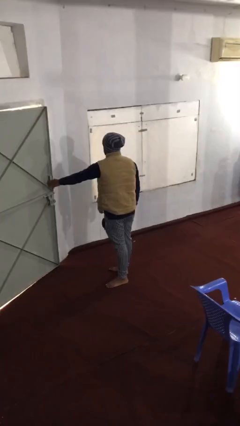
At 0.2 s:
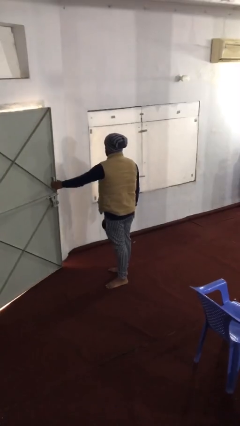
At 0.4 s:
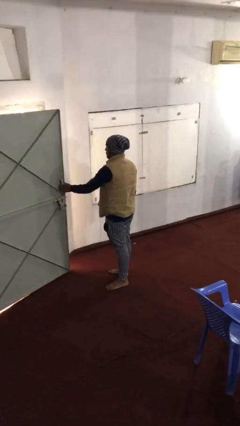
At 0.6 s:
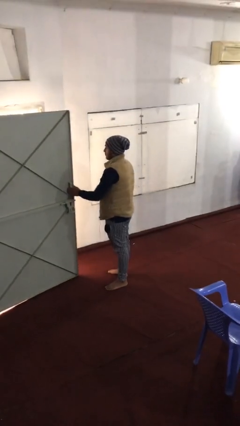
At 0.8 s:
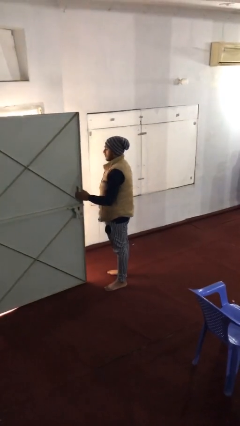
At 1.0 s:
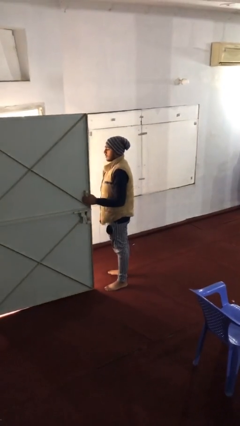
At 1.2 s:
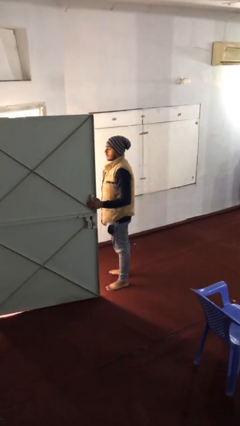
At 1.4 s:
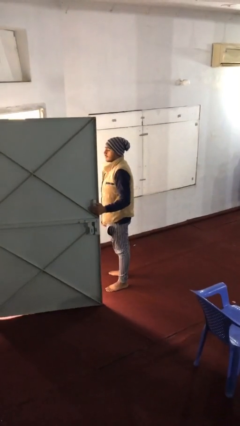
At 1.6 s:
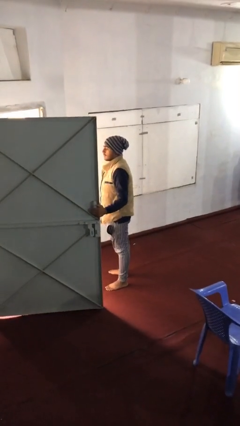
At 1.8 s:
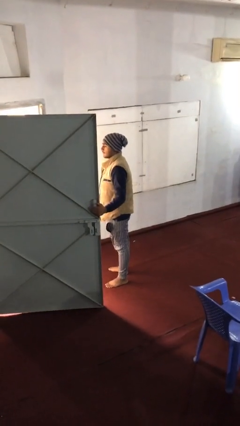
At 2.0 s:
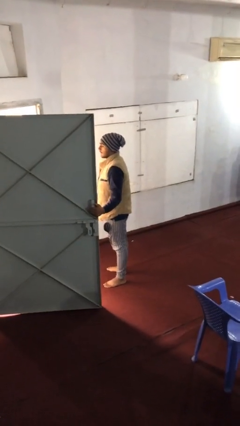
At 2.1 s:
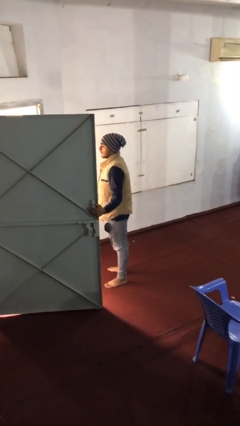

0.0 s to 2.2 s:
person opens facility door

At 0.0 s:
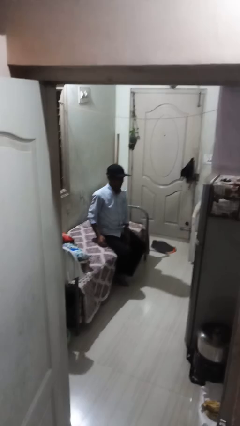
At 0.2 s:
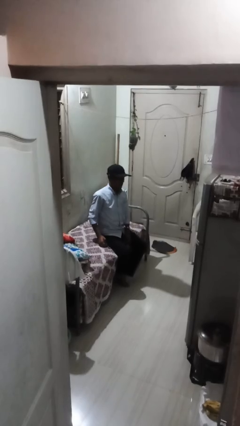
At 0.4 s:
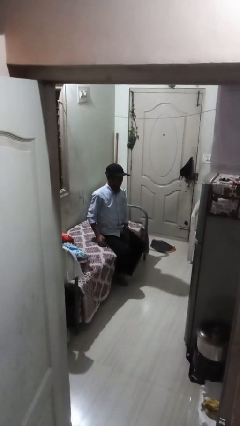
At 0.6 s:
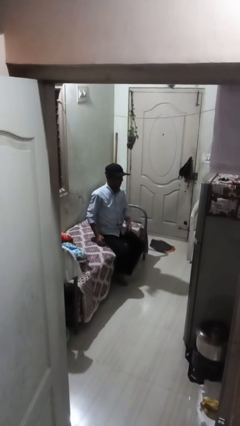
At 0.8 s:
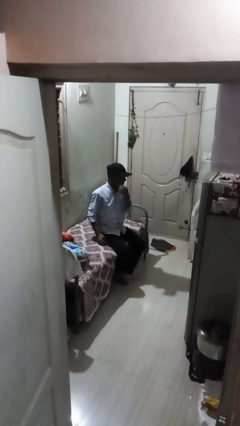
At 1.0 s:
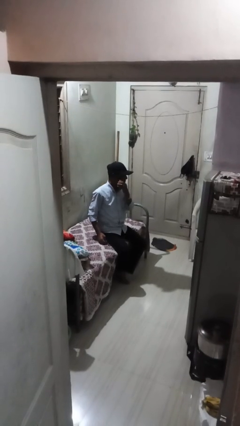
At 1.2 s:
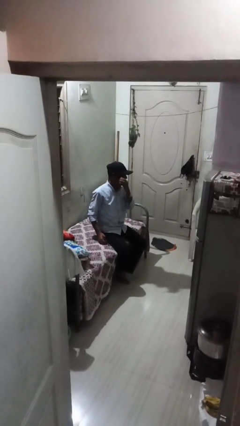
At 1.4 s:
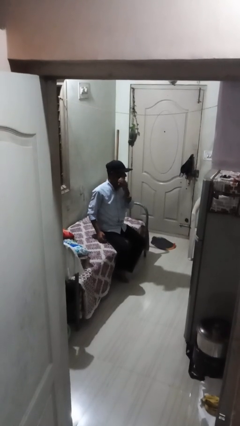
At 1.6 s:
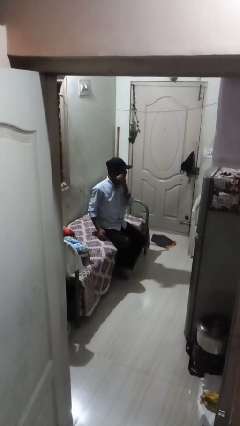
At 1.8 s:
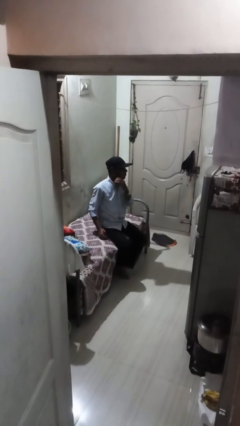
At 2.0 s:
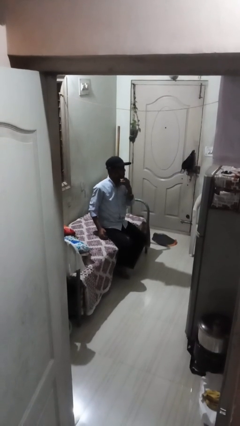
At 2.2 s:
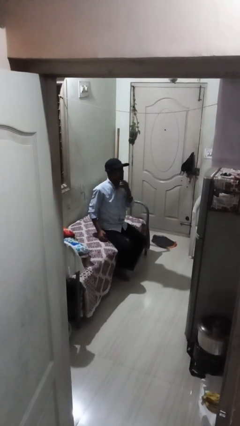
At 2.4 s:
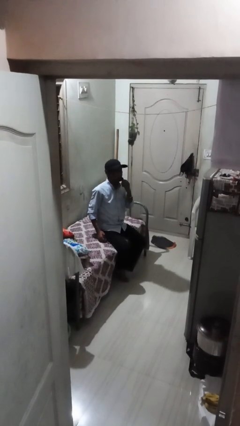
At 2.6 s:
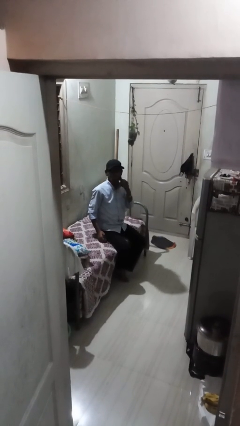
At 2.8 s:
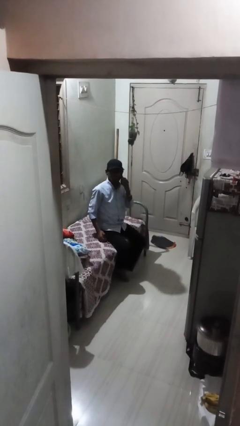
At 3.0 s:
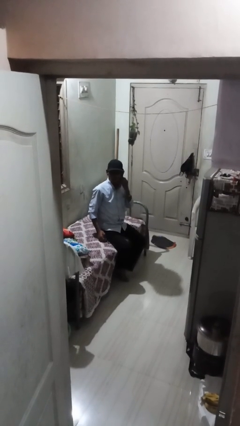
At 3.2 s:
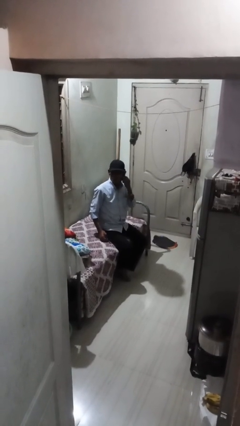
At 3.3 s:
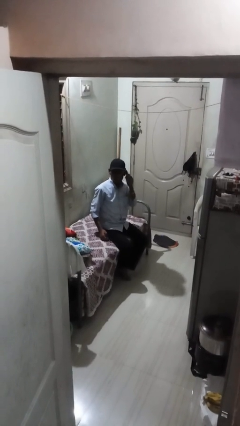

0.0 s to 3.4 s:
person applies shaving cream

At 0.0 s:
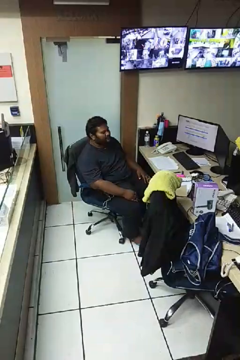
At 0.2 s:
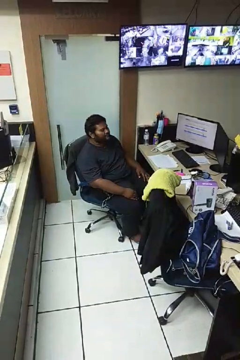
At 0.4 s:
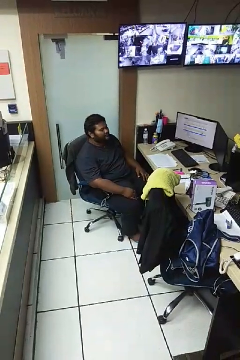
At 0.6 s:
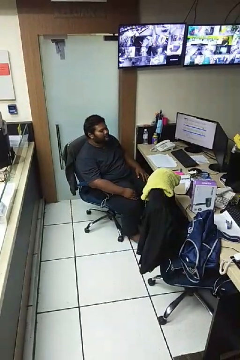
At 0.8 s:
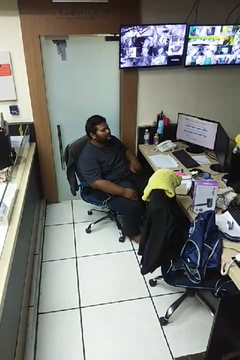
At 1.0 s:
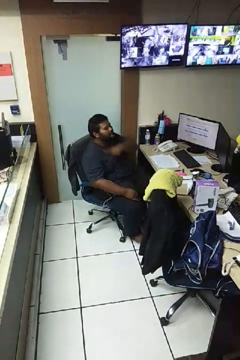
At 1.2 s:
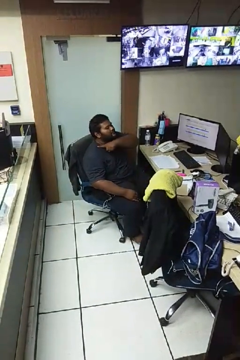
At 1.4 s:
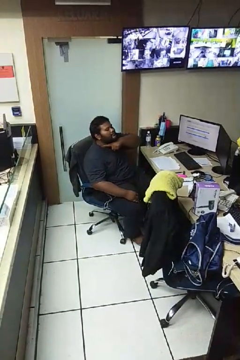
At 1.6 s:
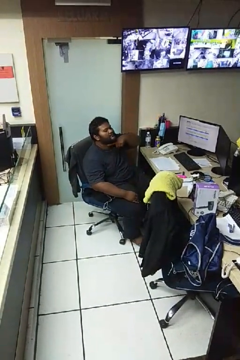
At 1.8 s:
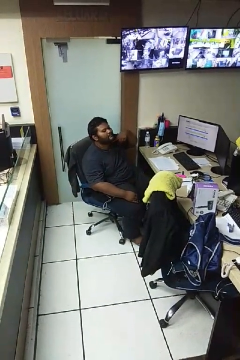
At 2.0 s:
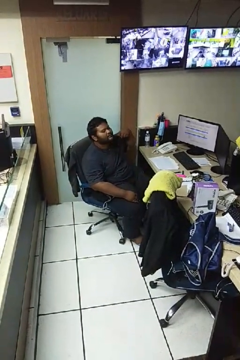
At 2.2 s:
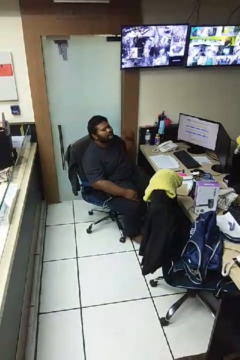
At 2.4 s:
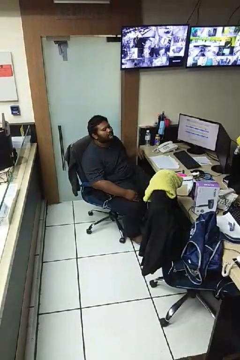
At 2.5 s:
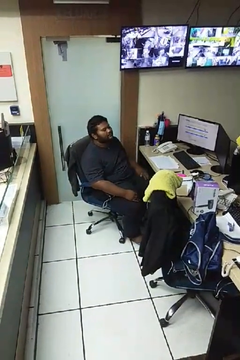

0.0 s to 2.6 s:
person gestures cut

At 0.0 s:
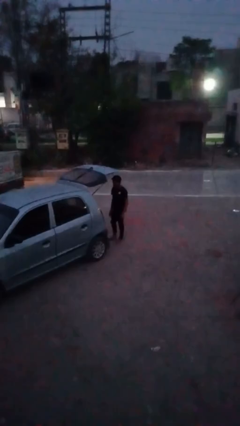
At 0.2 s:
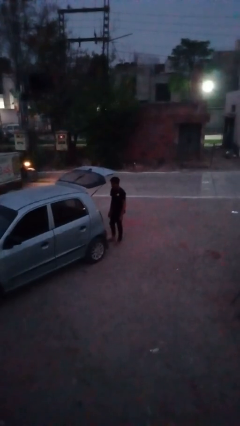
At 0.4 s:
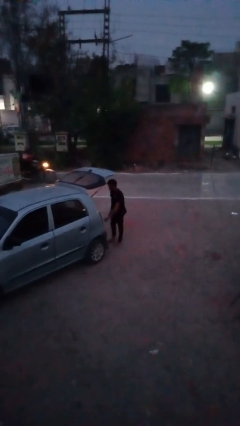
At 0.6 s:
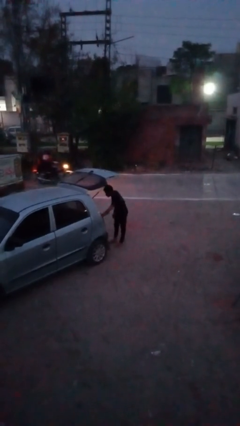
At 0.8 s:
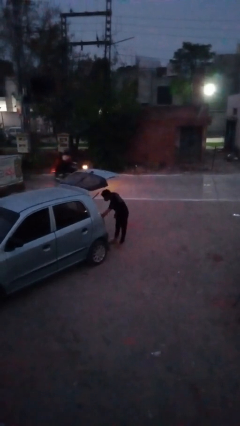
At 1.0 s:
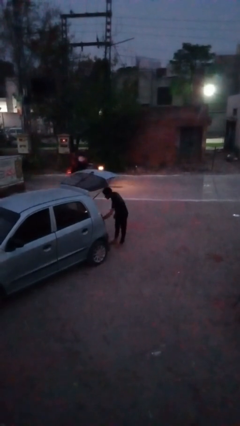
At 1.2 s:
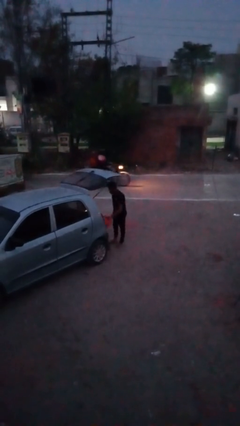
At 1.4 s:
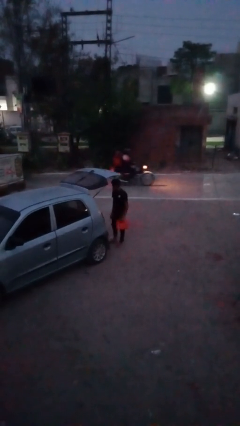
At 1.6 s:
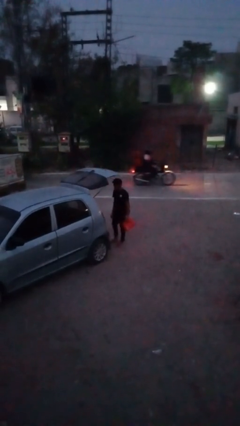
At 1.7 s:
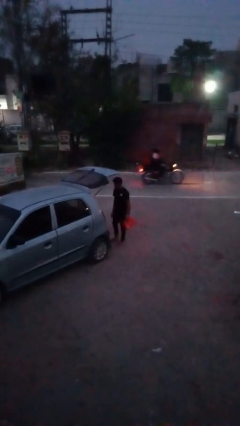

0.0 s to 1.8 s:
person unloads car

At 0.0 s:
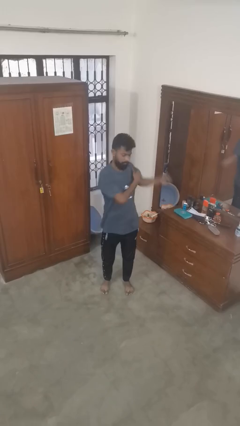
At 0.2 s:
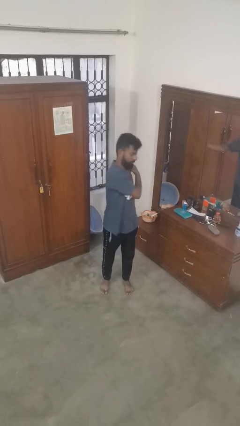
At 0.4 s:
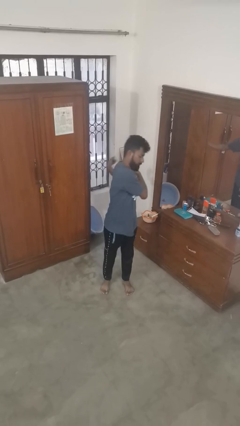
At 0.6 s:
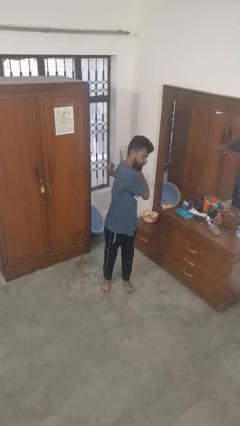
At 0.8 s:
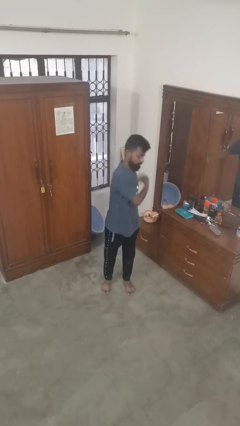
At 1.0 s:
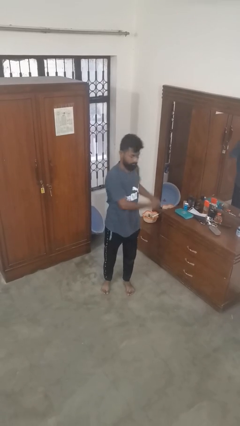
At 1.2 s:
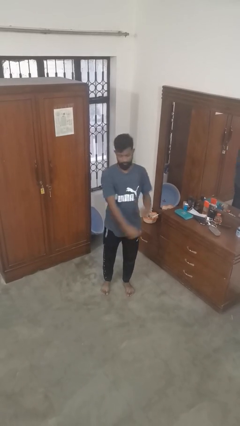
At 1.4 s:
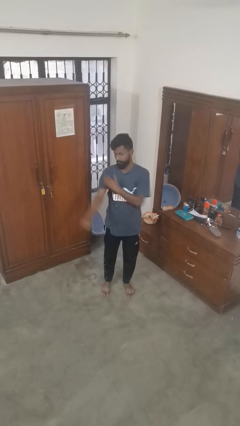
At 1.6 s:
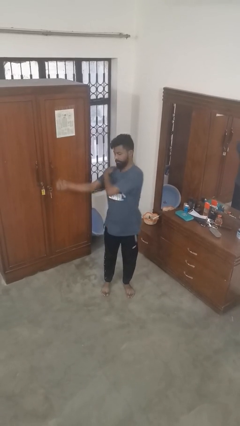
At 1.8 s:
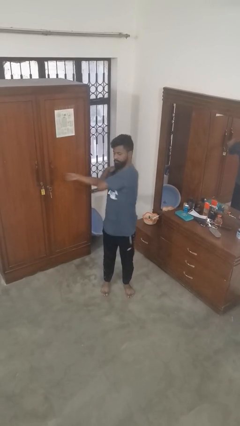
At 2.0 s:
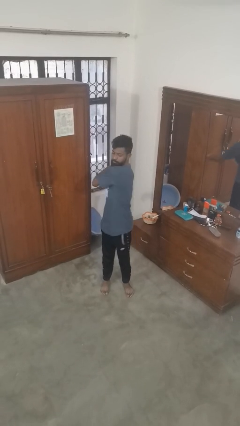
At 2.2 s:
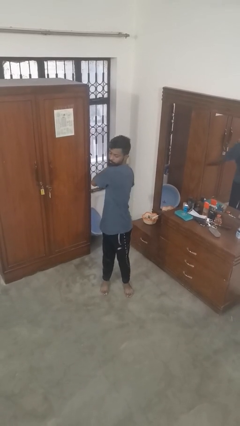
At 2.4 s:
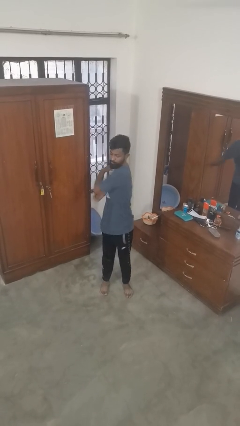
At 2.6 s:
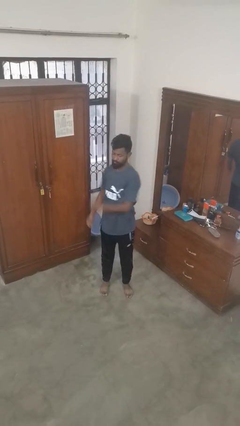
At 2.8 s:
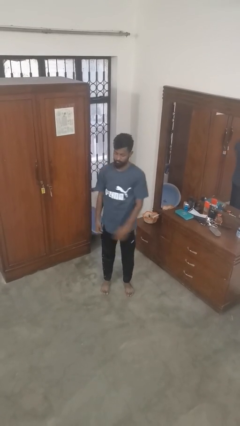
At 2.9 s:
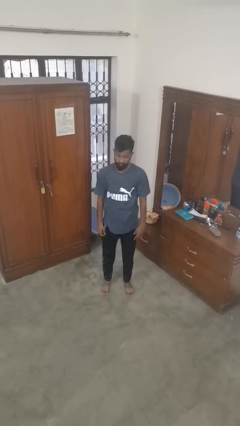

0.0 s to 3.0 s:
person stretches arms to side

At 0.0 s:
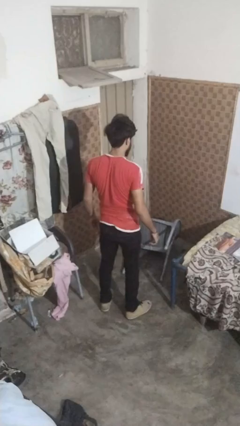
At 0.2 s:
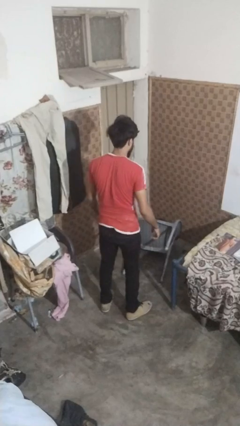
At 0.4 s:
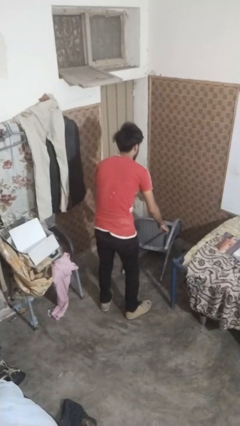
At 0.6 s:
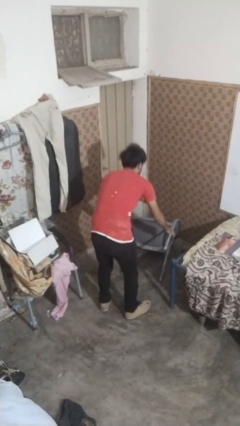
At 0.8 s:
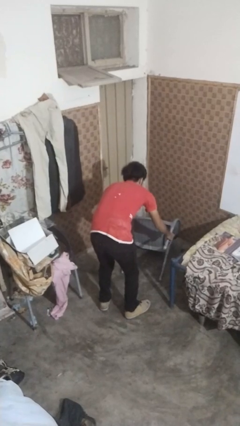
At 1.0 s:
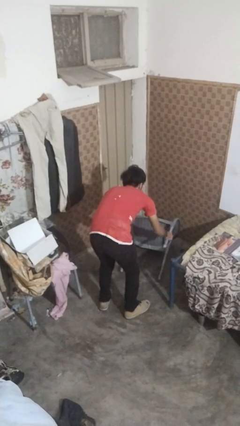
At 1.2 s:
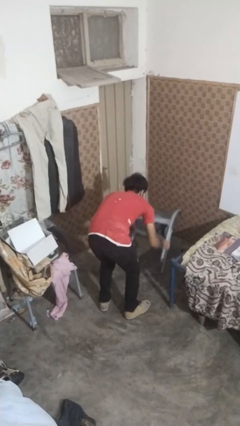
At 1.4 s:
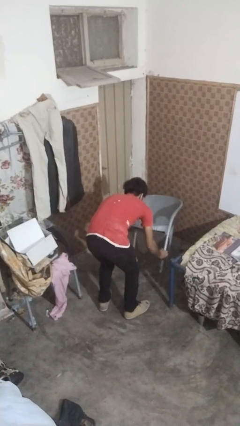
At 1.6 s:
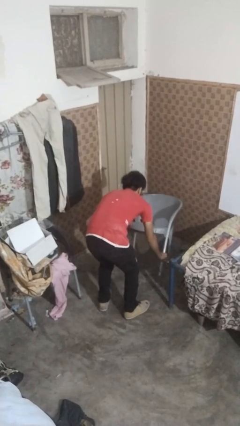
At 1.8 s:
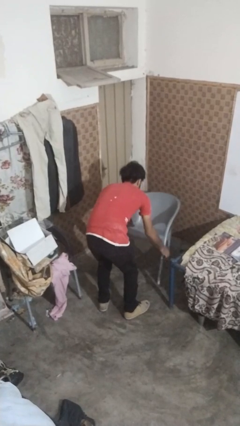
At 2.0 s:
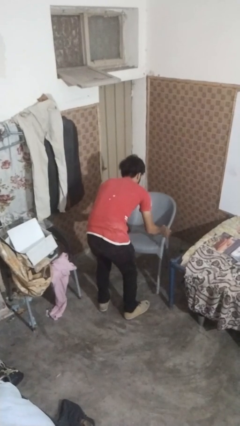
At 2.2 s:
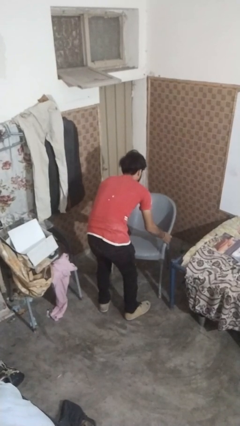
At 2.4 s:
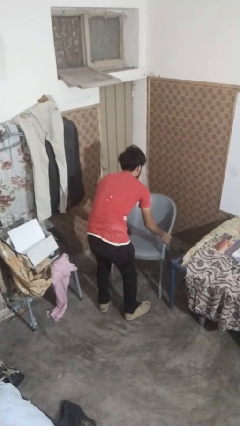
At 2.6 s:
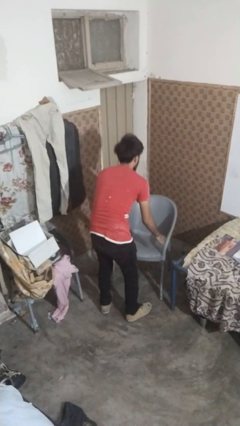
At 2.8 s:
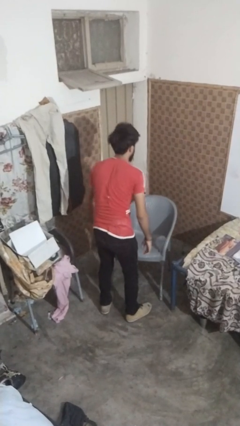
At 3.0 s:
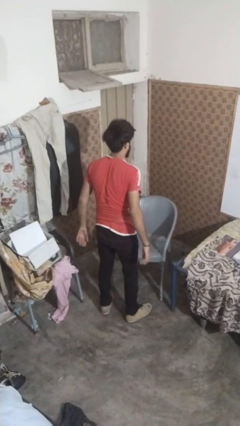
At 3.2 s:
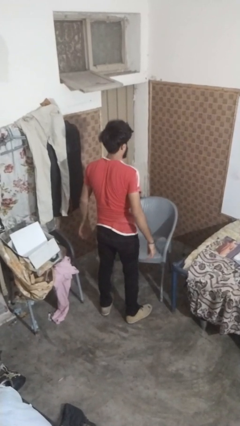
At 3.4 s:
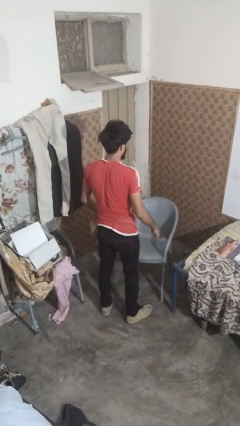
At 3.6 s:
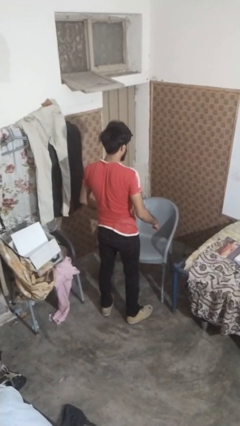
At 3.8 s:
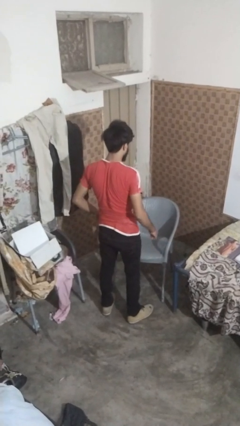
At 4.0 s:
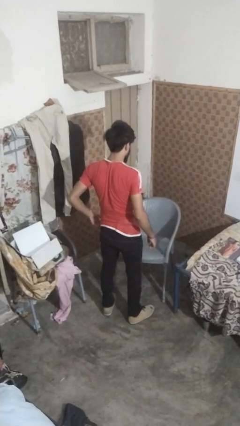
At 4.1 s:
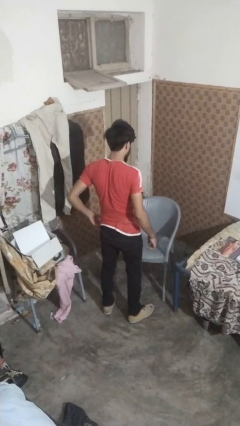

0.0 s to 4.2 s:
person sets upright furniture
